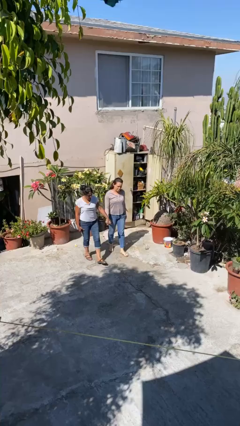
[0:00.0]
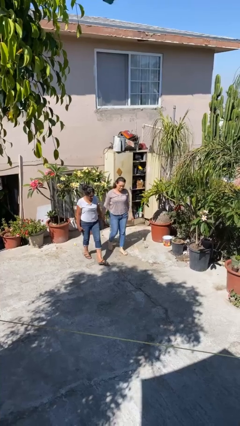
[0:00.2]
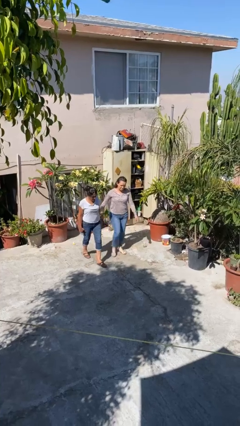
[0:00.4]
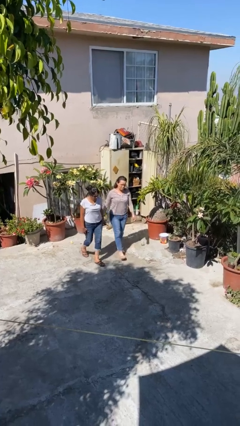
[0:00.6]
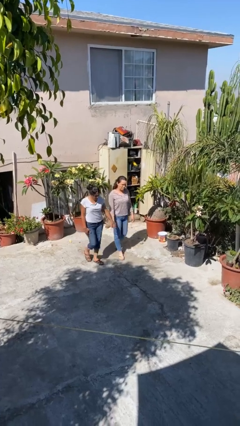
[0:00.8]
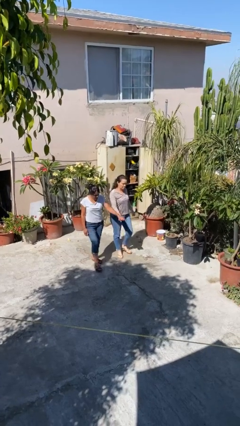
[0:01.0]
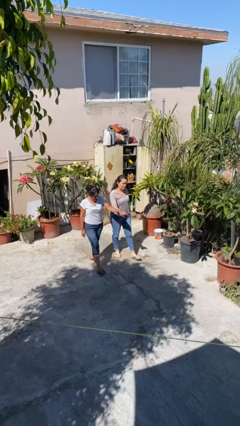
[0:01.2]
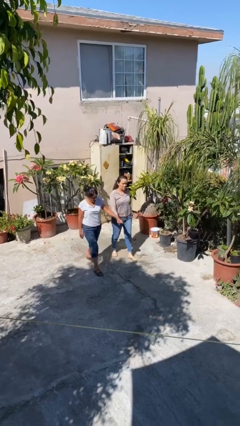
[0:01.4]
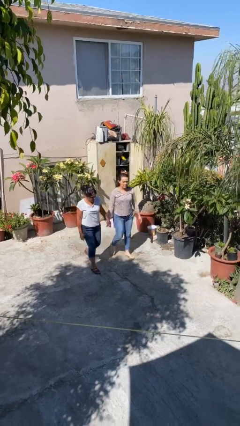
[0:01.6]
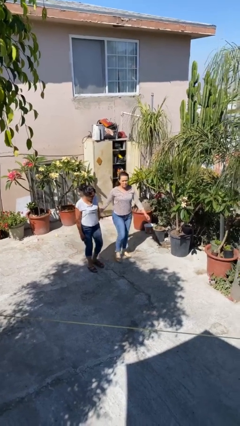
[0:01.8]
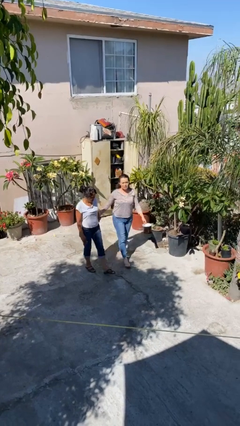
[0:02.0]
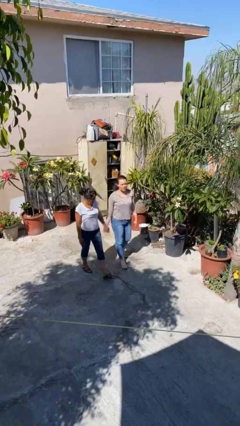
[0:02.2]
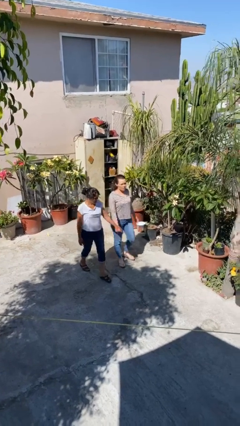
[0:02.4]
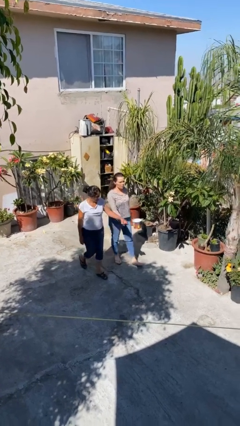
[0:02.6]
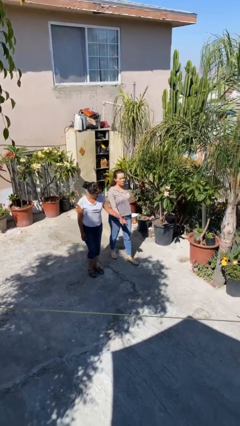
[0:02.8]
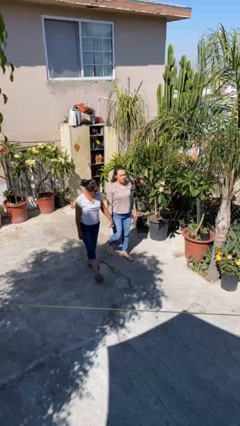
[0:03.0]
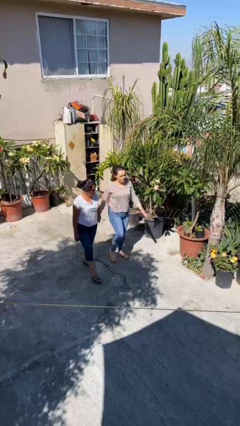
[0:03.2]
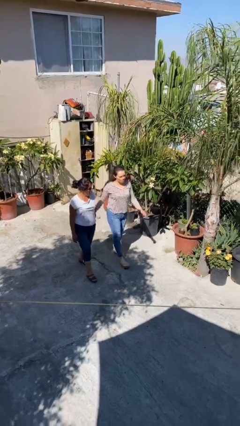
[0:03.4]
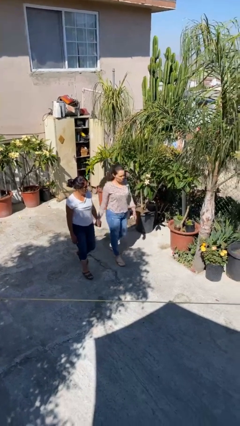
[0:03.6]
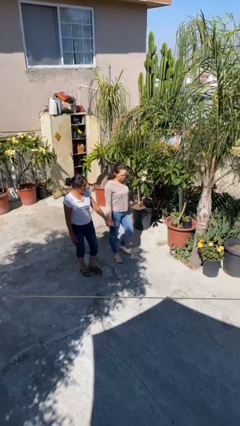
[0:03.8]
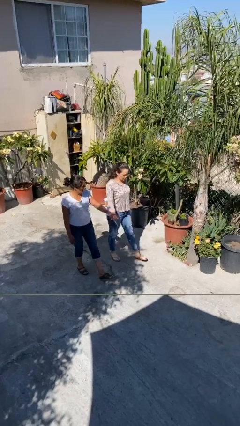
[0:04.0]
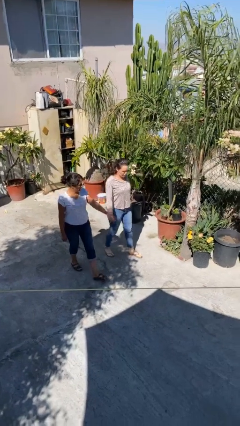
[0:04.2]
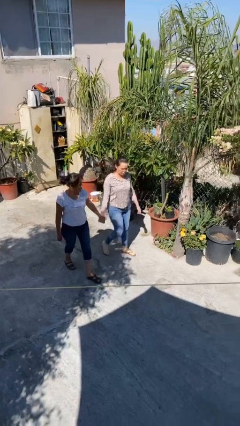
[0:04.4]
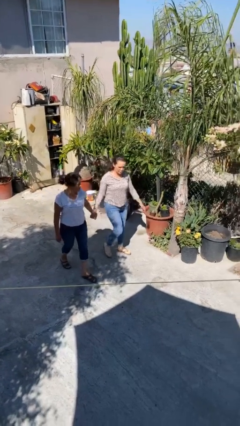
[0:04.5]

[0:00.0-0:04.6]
person holds hand

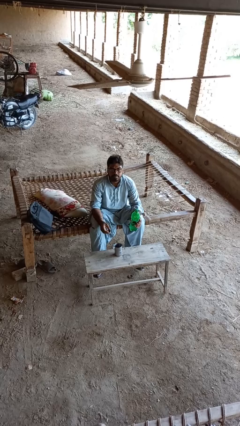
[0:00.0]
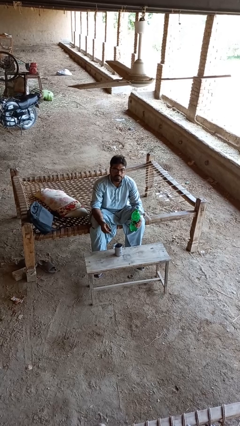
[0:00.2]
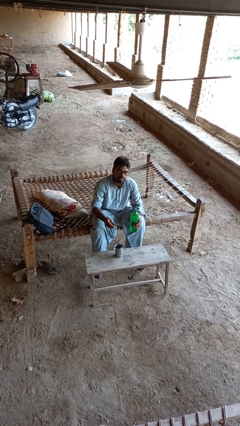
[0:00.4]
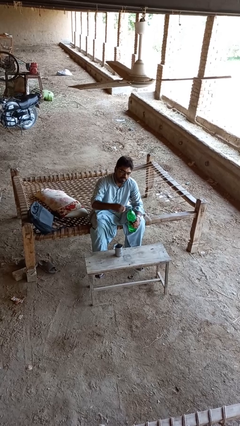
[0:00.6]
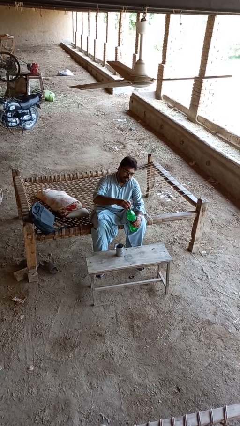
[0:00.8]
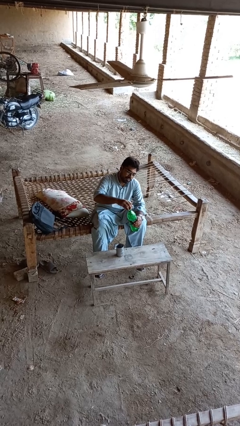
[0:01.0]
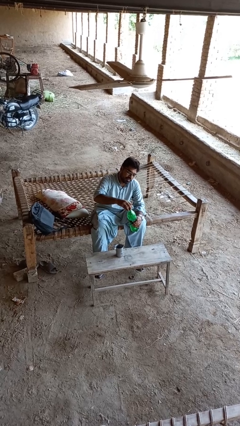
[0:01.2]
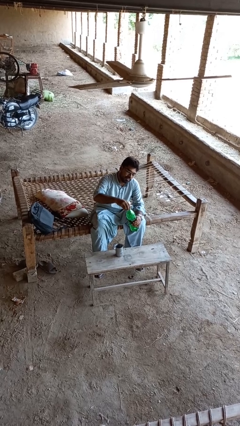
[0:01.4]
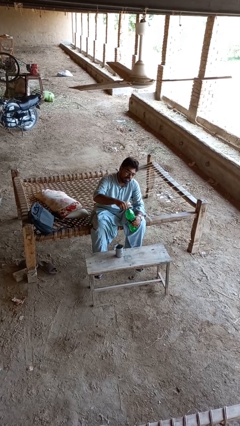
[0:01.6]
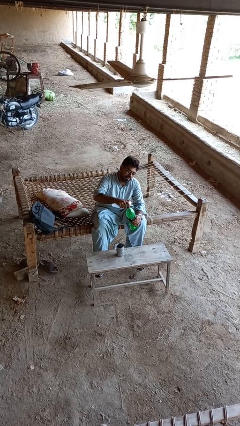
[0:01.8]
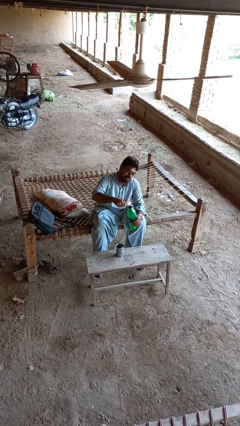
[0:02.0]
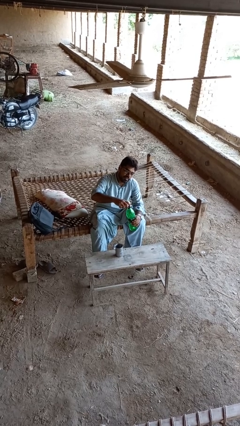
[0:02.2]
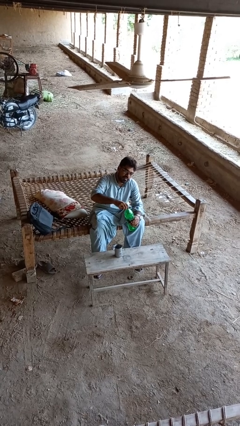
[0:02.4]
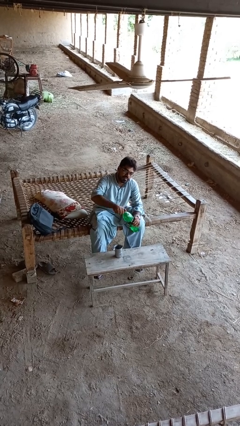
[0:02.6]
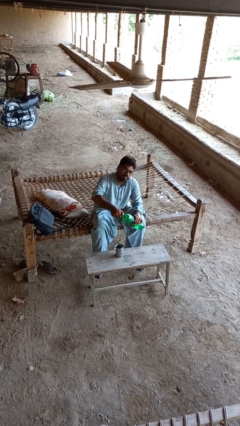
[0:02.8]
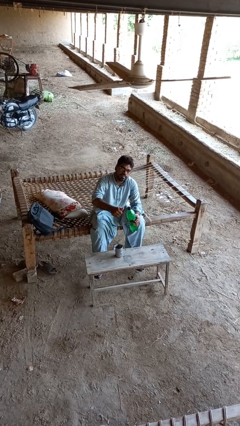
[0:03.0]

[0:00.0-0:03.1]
person screws lid to bottle

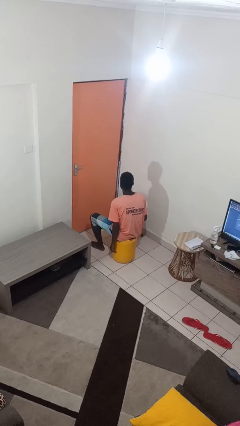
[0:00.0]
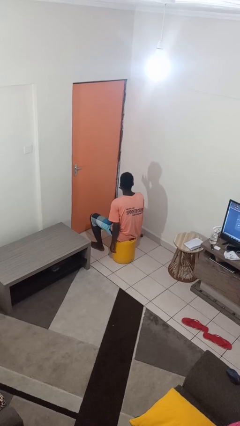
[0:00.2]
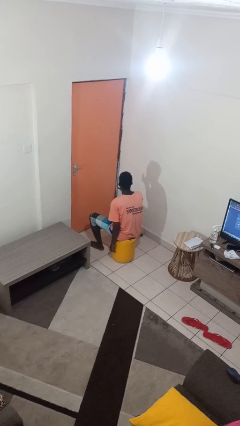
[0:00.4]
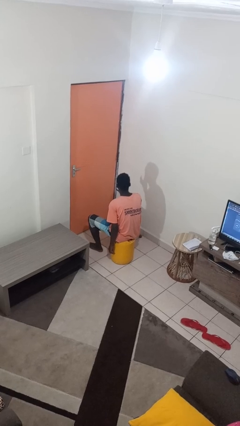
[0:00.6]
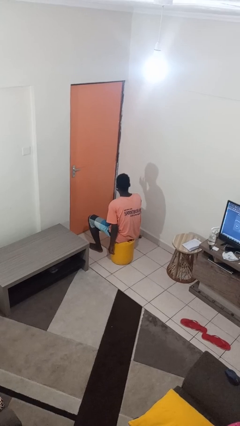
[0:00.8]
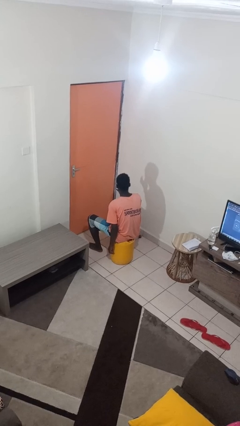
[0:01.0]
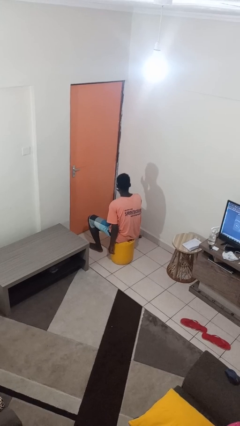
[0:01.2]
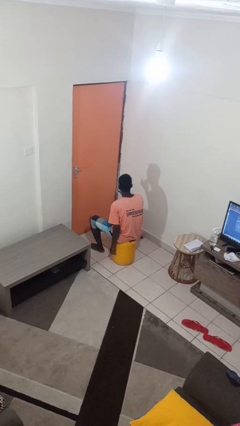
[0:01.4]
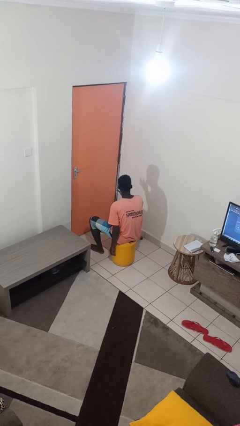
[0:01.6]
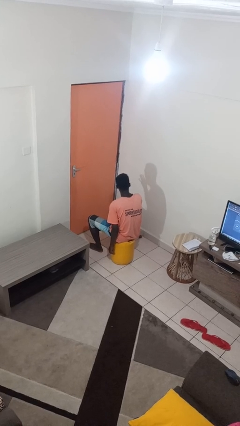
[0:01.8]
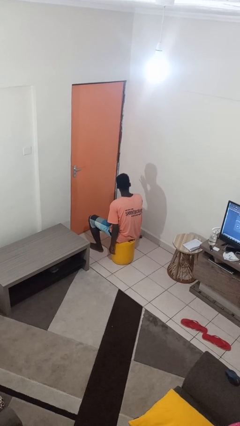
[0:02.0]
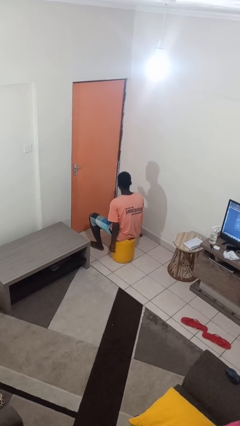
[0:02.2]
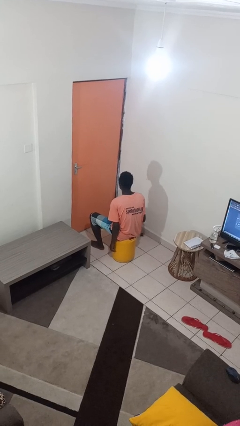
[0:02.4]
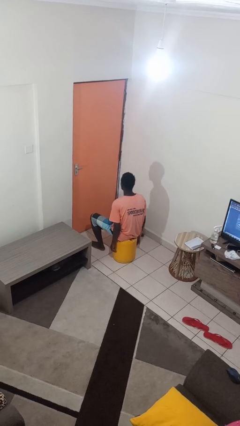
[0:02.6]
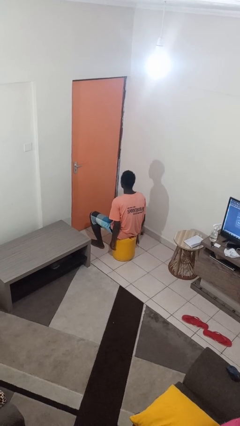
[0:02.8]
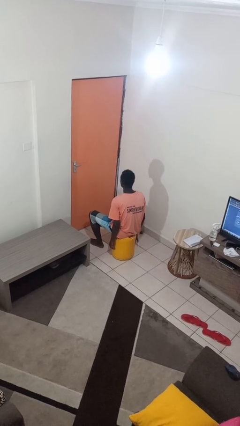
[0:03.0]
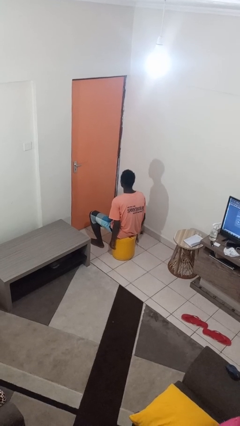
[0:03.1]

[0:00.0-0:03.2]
person licks fingers

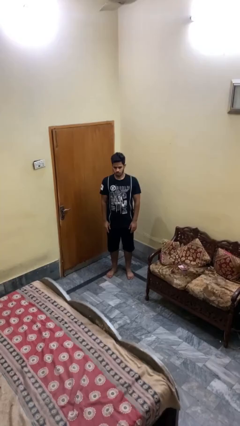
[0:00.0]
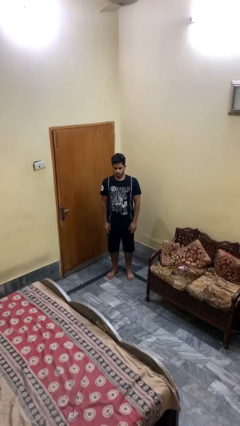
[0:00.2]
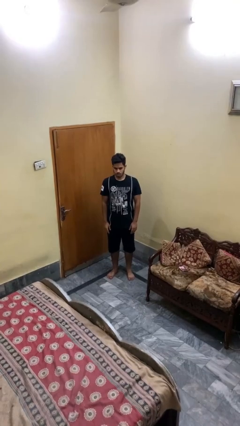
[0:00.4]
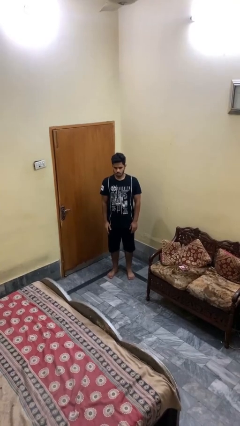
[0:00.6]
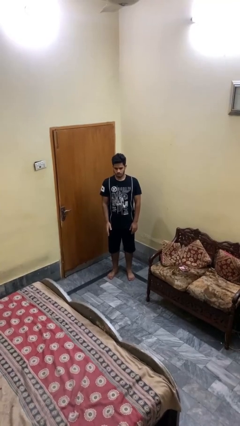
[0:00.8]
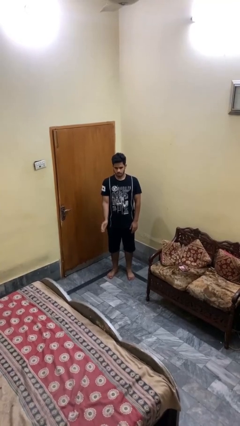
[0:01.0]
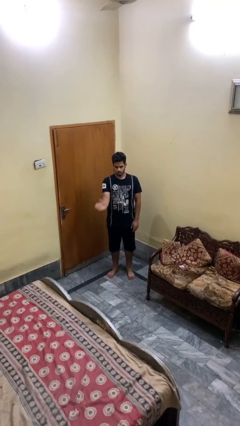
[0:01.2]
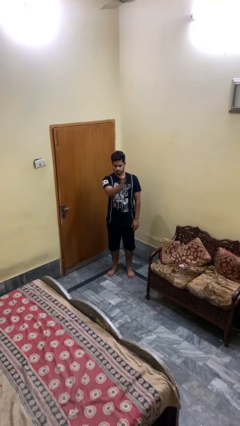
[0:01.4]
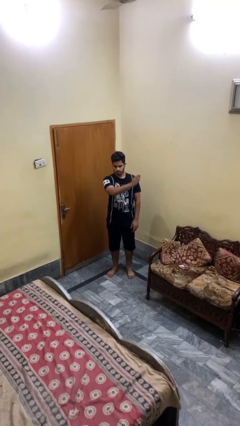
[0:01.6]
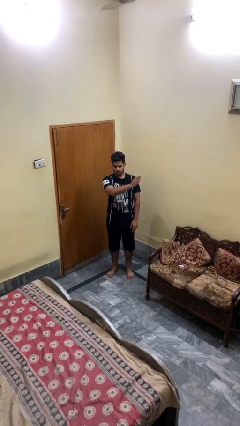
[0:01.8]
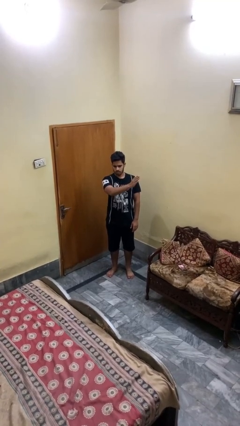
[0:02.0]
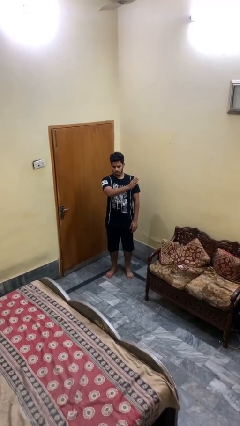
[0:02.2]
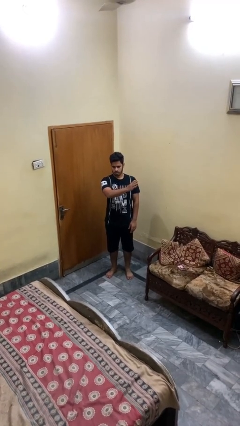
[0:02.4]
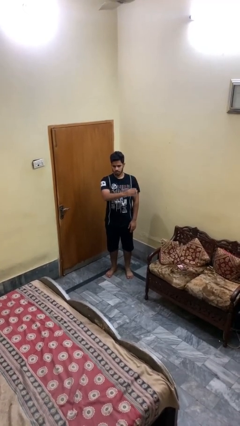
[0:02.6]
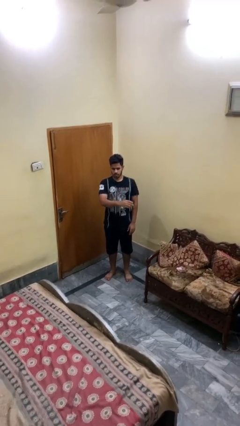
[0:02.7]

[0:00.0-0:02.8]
person gestures swipe left

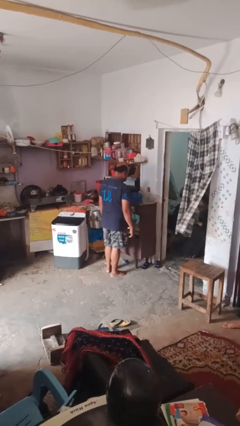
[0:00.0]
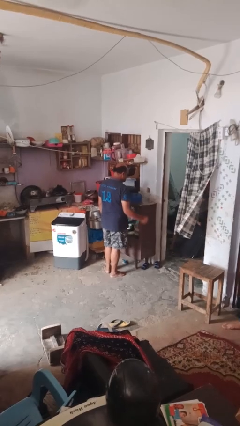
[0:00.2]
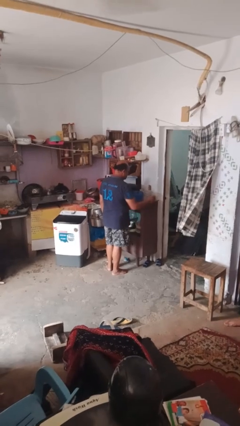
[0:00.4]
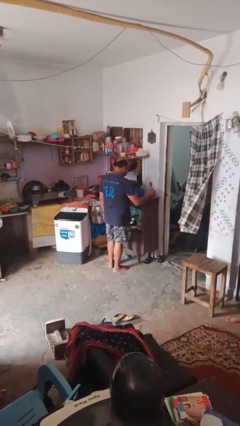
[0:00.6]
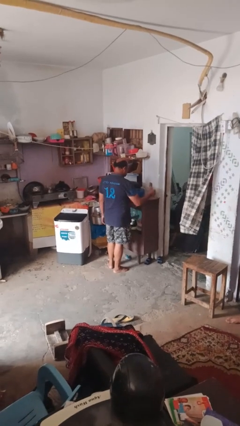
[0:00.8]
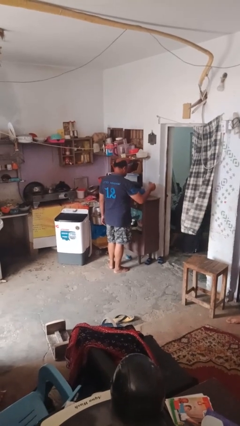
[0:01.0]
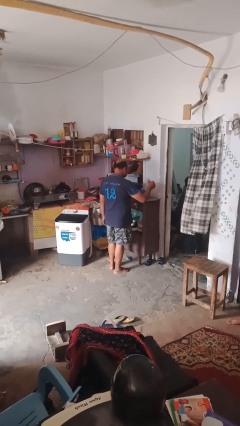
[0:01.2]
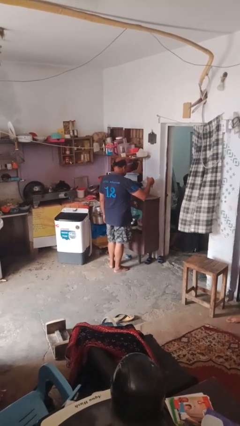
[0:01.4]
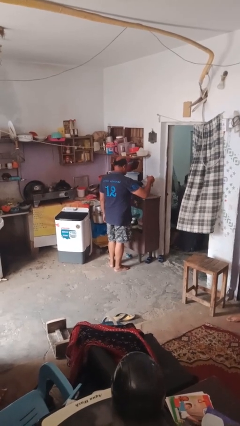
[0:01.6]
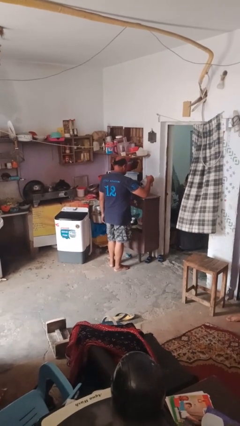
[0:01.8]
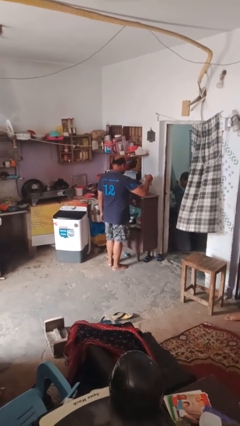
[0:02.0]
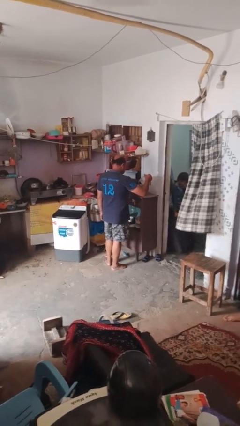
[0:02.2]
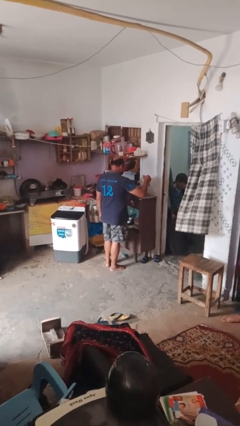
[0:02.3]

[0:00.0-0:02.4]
person pours into bowl

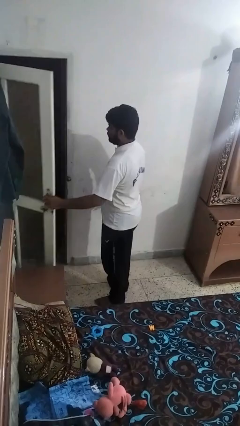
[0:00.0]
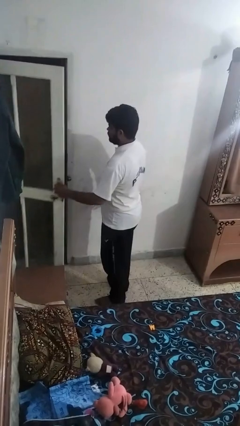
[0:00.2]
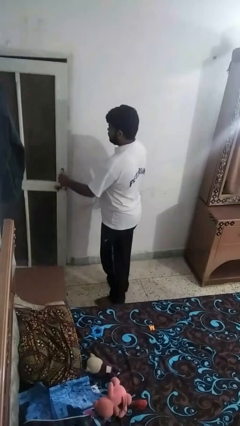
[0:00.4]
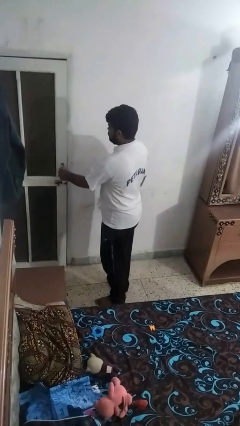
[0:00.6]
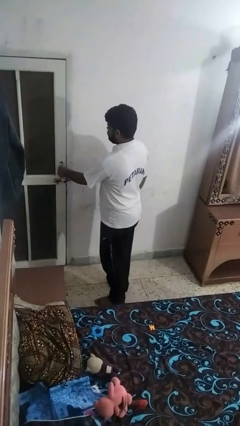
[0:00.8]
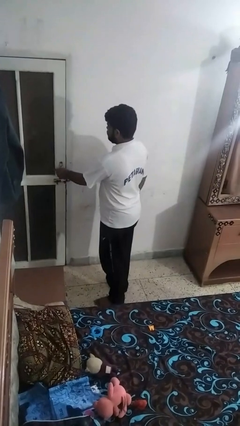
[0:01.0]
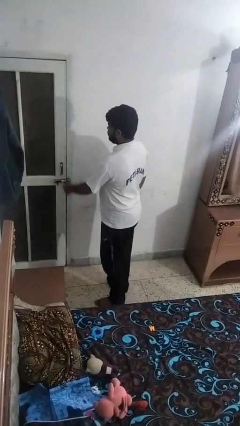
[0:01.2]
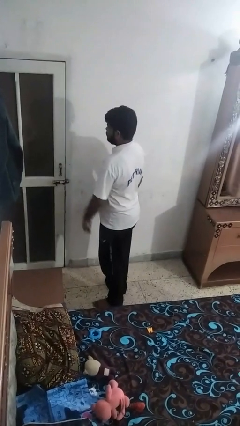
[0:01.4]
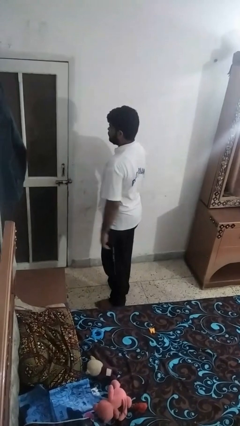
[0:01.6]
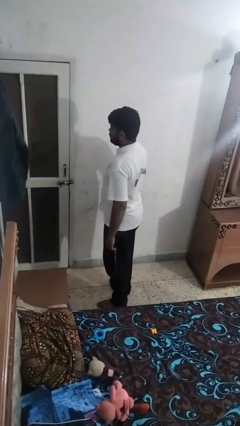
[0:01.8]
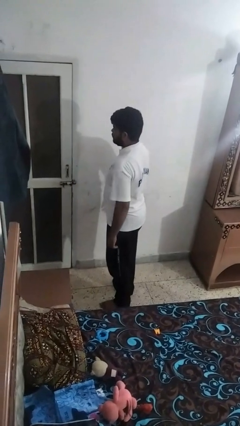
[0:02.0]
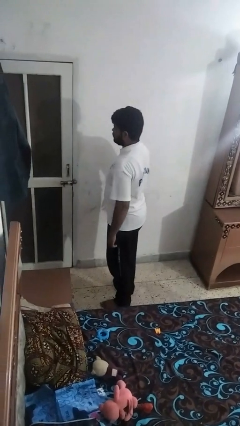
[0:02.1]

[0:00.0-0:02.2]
person closes gate
